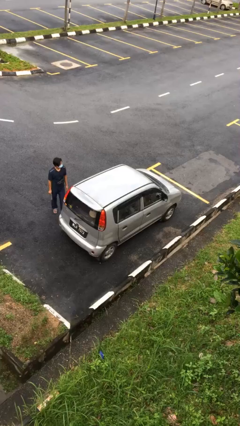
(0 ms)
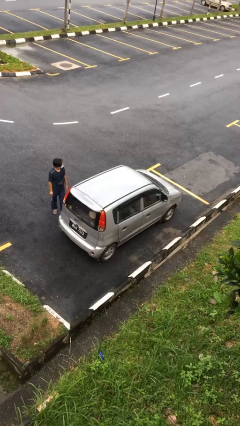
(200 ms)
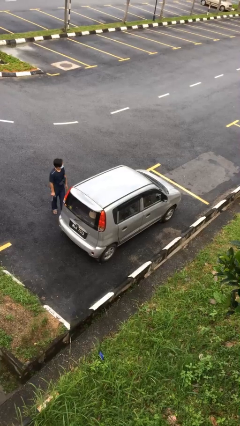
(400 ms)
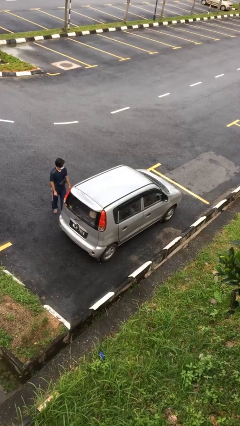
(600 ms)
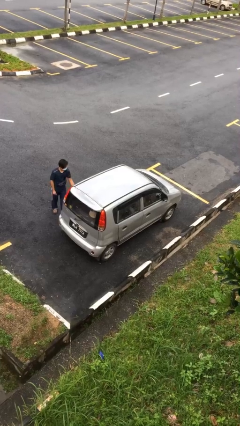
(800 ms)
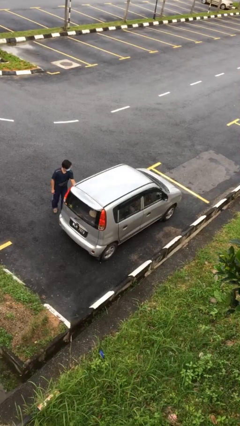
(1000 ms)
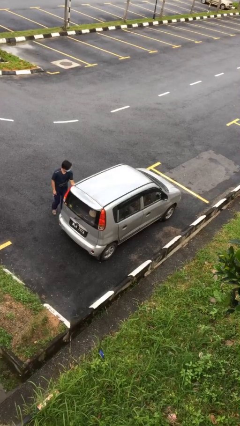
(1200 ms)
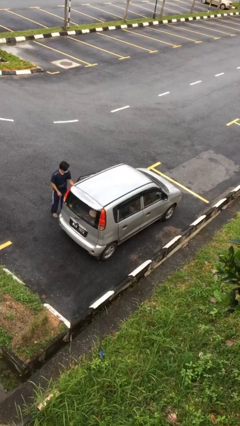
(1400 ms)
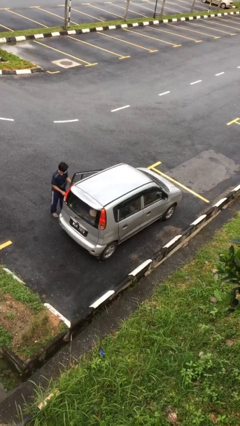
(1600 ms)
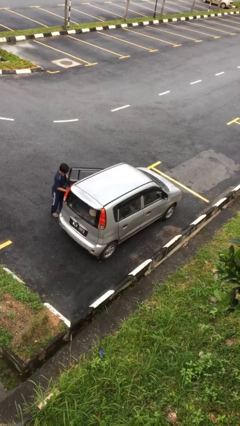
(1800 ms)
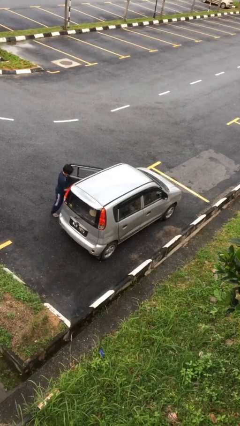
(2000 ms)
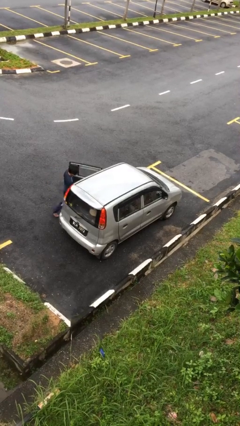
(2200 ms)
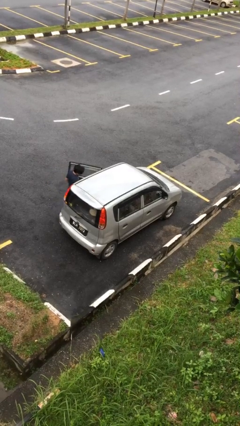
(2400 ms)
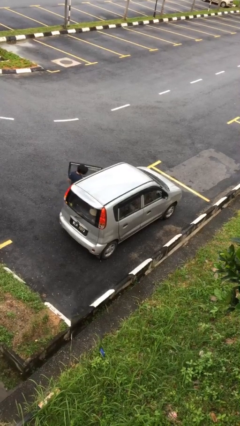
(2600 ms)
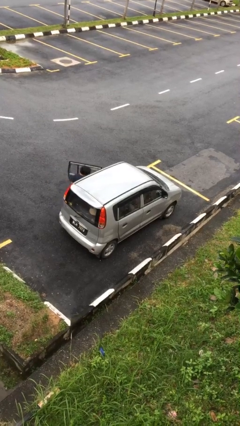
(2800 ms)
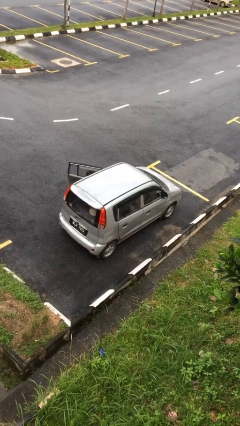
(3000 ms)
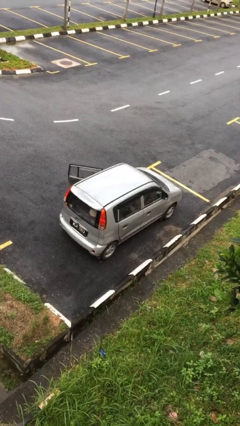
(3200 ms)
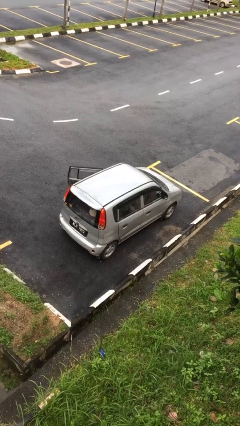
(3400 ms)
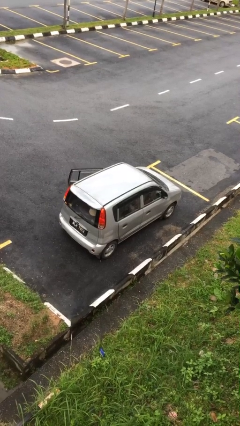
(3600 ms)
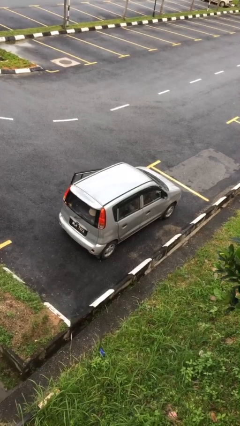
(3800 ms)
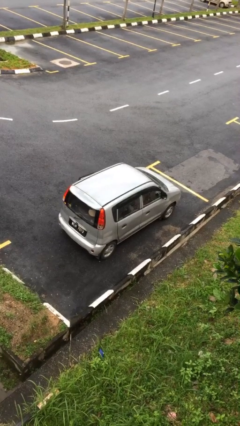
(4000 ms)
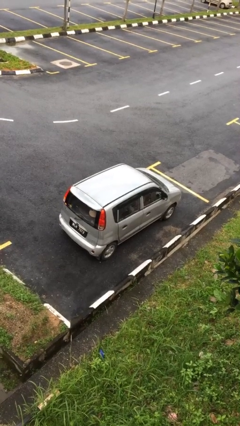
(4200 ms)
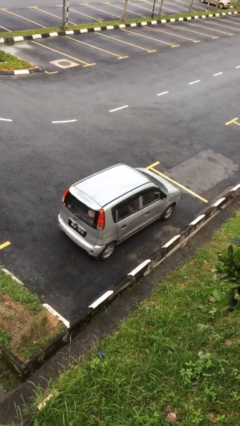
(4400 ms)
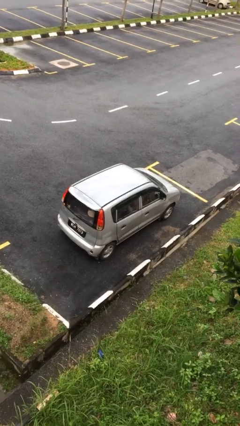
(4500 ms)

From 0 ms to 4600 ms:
car picks up person
